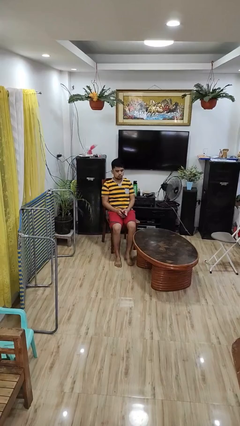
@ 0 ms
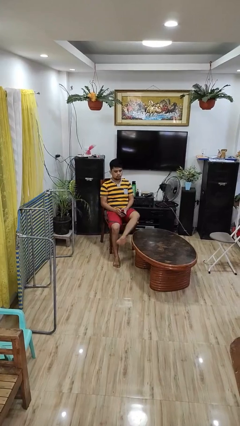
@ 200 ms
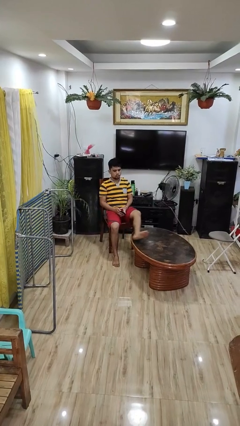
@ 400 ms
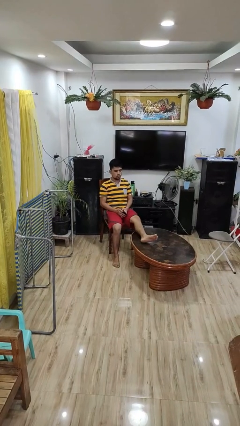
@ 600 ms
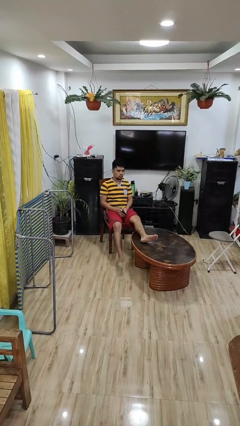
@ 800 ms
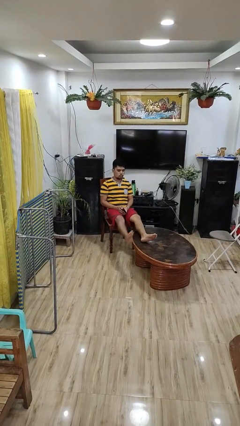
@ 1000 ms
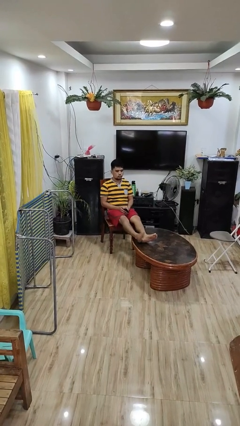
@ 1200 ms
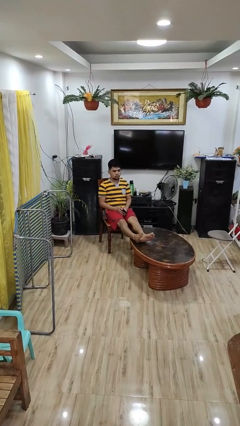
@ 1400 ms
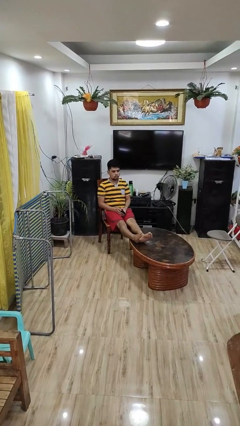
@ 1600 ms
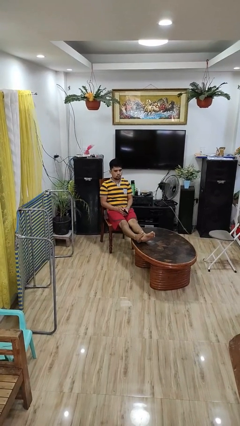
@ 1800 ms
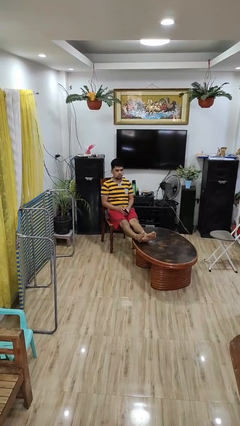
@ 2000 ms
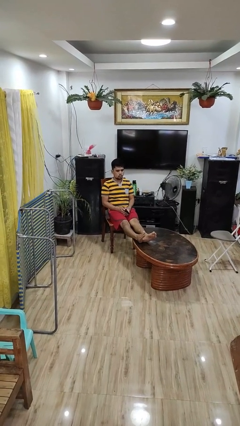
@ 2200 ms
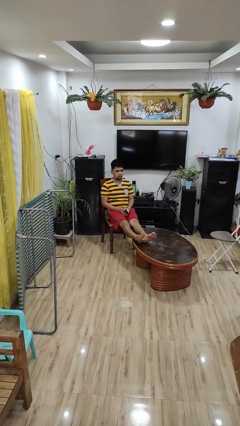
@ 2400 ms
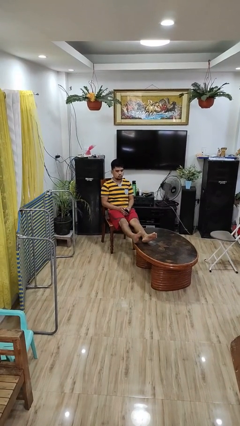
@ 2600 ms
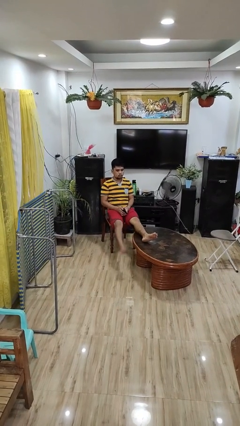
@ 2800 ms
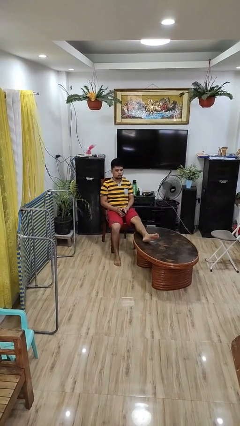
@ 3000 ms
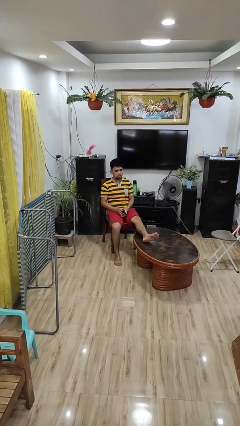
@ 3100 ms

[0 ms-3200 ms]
person puts feet up

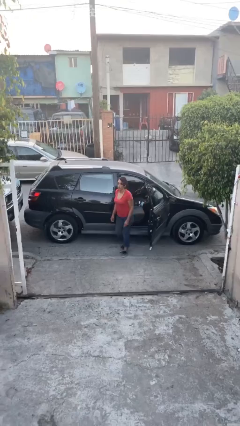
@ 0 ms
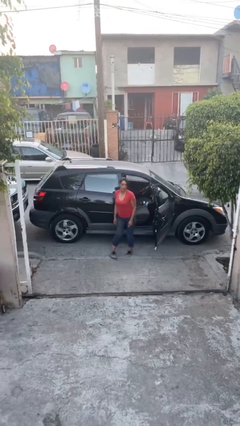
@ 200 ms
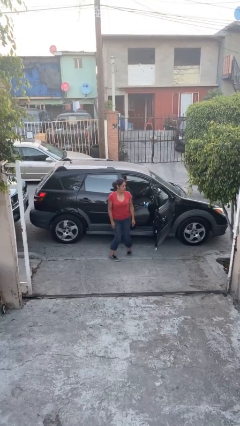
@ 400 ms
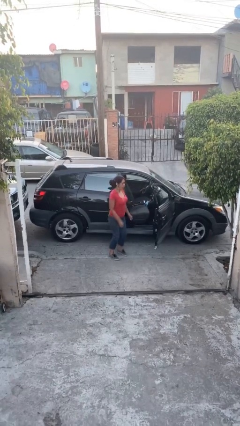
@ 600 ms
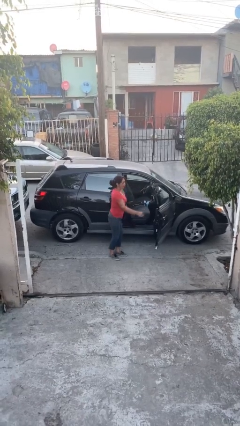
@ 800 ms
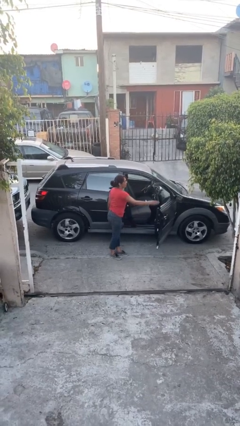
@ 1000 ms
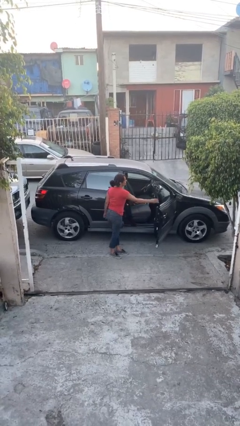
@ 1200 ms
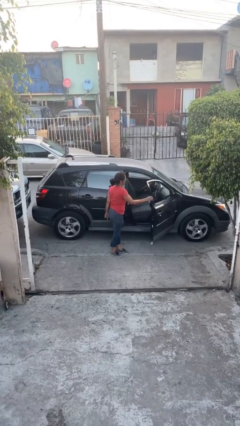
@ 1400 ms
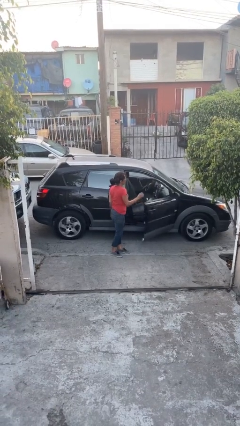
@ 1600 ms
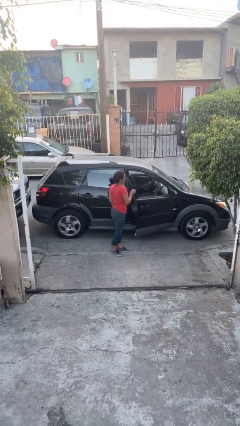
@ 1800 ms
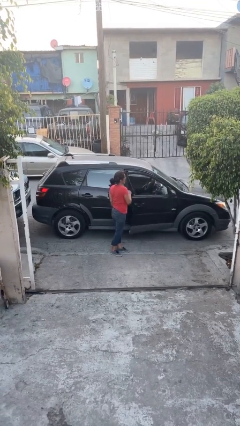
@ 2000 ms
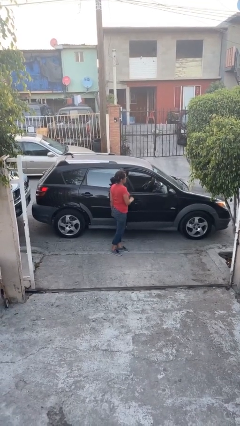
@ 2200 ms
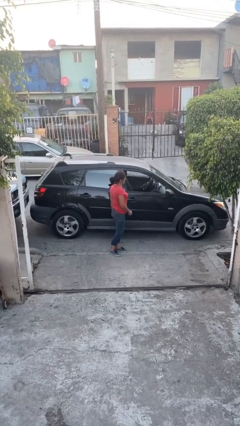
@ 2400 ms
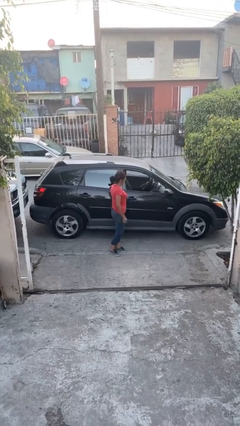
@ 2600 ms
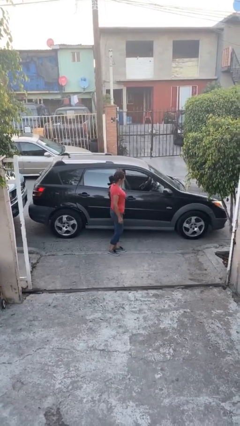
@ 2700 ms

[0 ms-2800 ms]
person closes car door

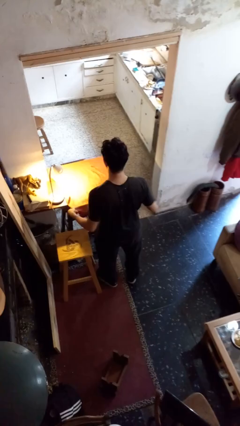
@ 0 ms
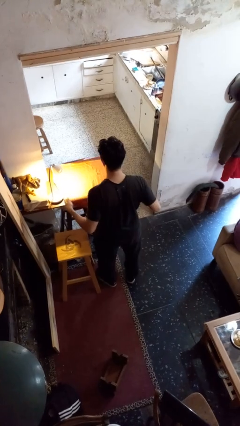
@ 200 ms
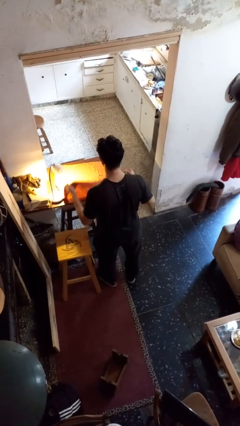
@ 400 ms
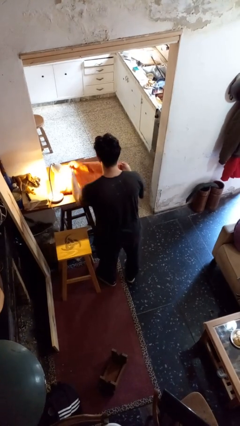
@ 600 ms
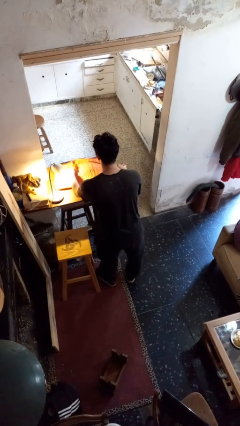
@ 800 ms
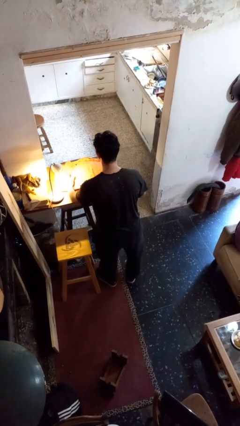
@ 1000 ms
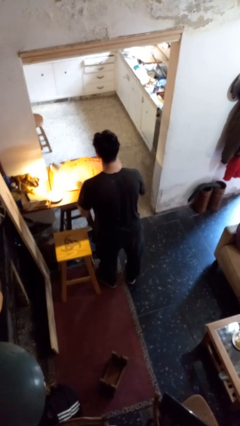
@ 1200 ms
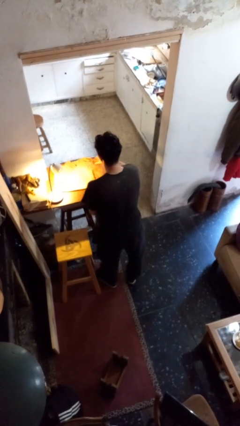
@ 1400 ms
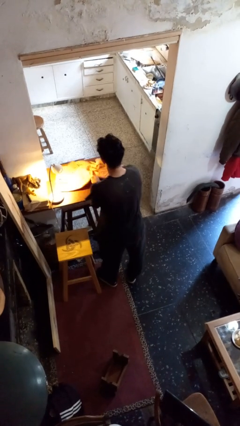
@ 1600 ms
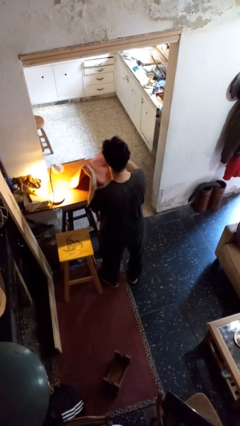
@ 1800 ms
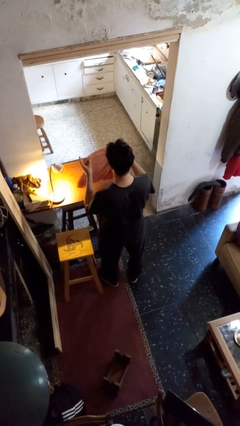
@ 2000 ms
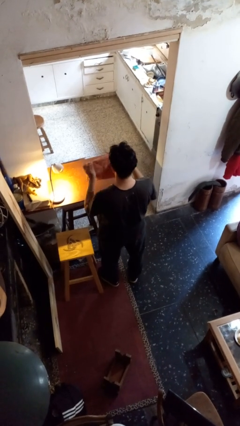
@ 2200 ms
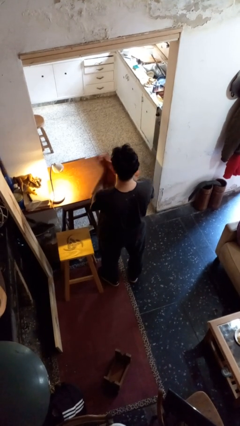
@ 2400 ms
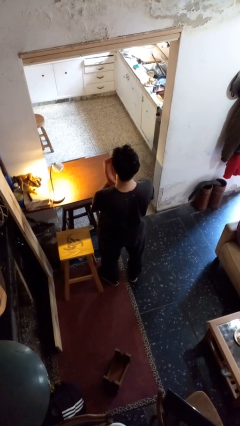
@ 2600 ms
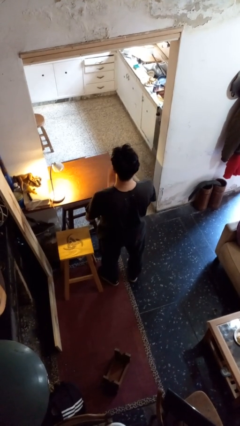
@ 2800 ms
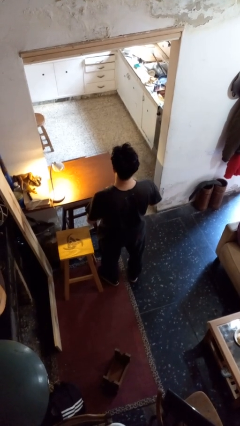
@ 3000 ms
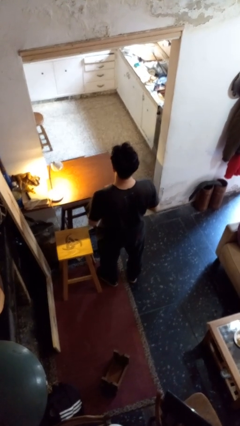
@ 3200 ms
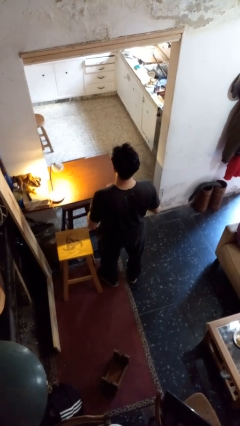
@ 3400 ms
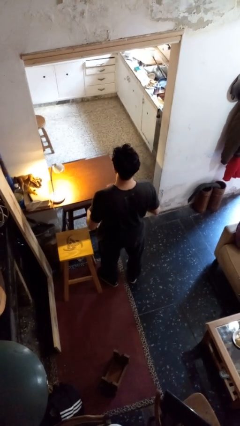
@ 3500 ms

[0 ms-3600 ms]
person folds tablecloth

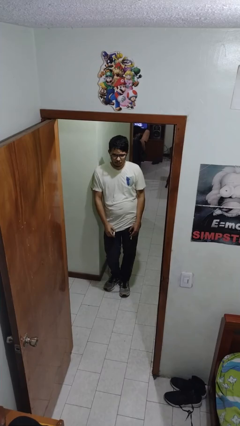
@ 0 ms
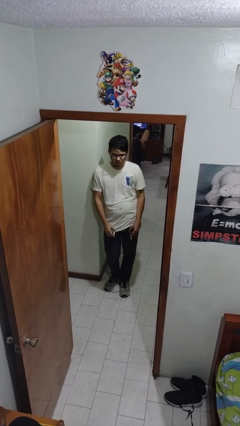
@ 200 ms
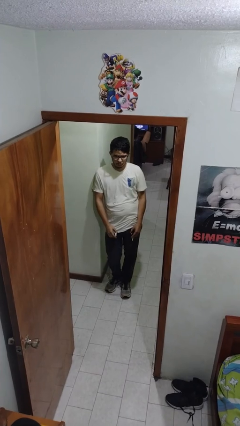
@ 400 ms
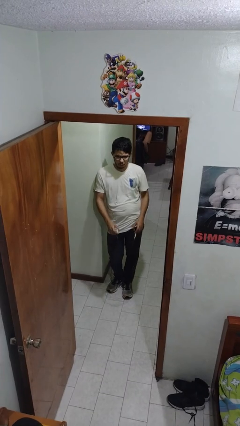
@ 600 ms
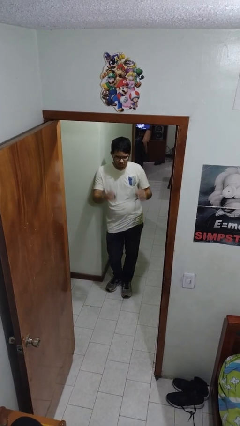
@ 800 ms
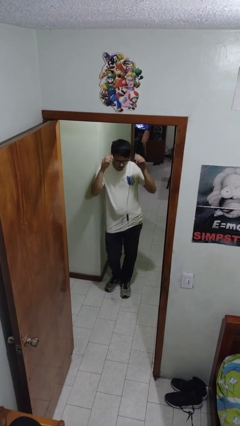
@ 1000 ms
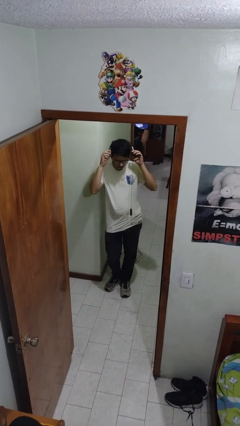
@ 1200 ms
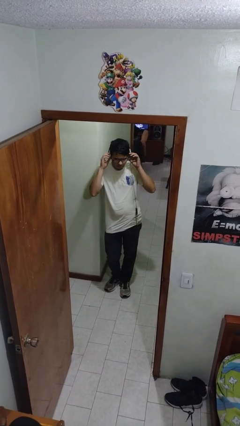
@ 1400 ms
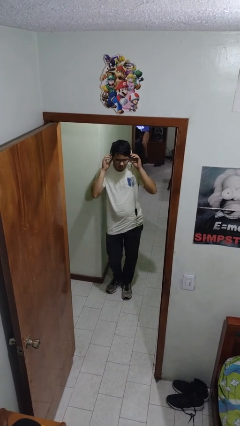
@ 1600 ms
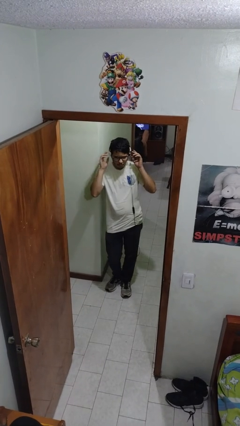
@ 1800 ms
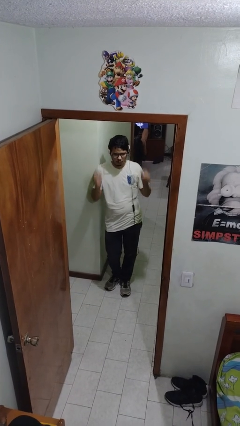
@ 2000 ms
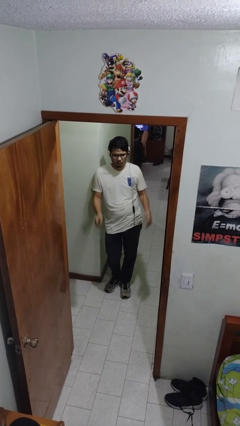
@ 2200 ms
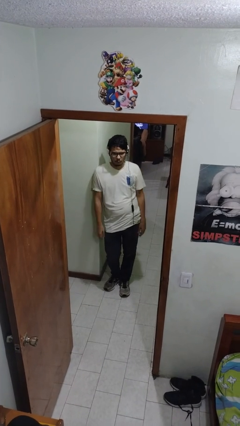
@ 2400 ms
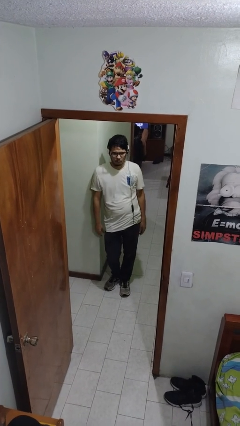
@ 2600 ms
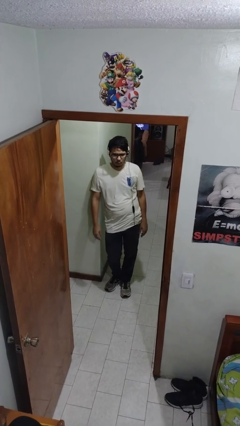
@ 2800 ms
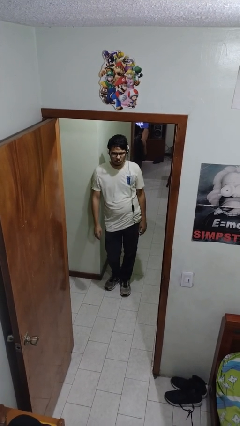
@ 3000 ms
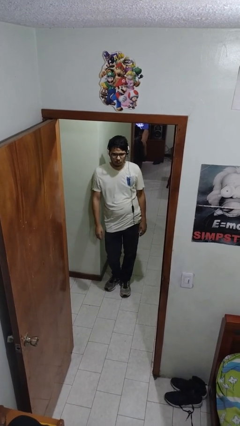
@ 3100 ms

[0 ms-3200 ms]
person puts on headphones

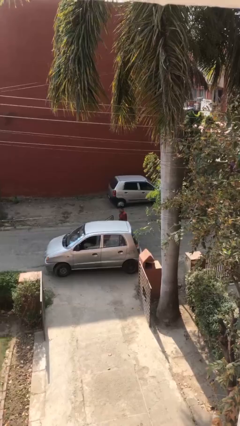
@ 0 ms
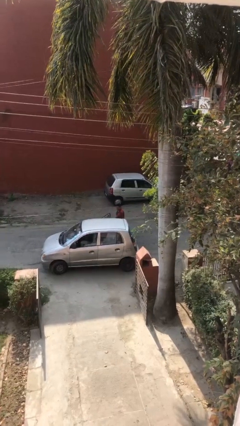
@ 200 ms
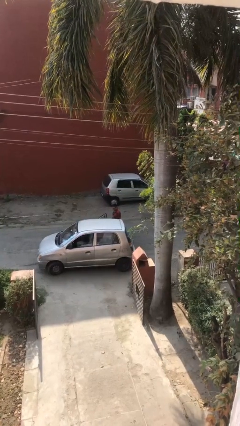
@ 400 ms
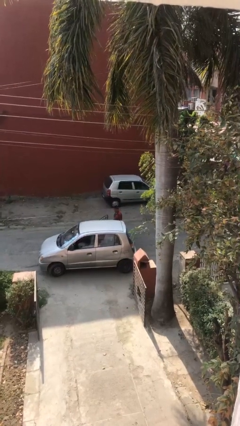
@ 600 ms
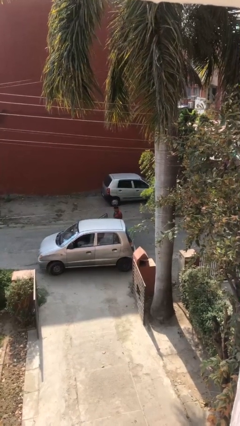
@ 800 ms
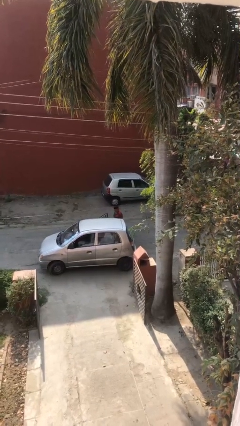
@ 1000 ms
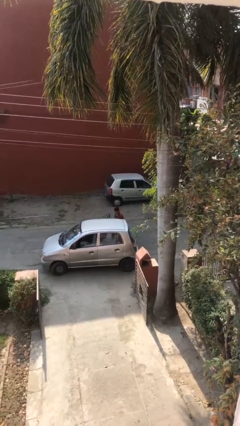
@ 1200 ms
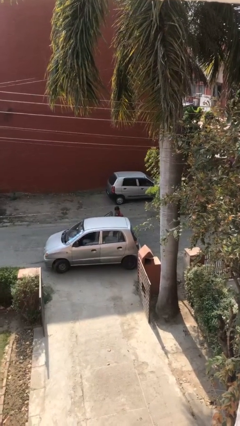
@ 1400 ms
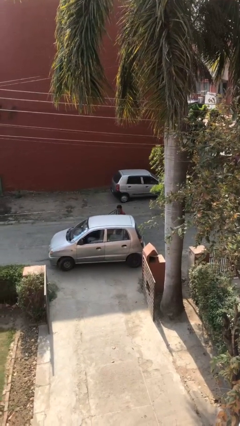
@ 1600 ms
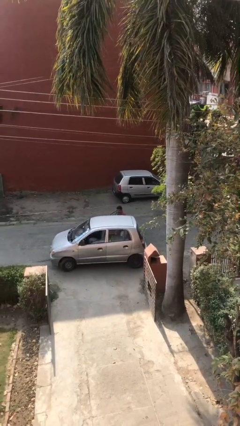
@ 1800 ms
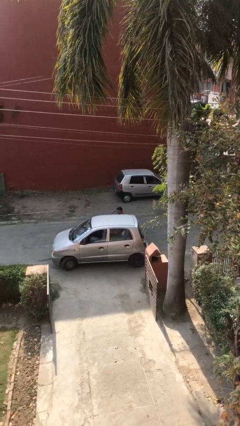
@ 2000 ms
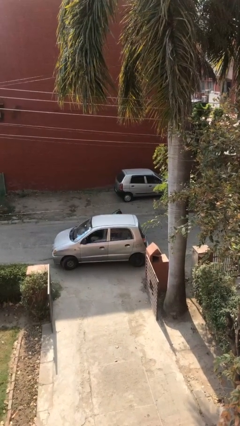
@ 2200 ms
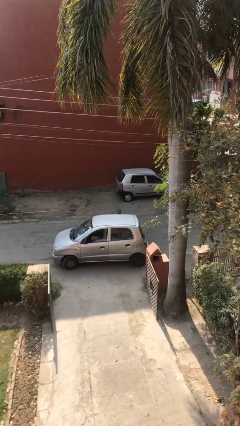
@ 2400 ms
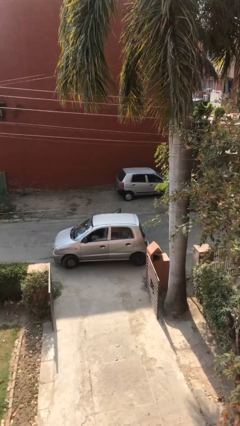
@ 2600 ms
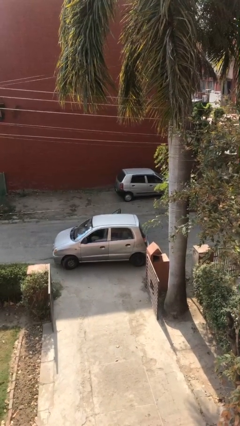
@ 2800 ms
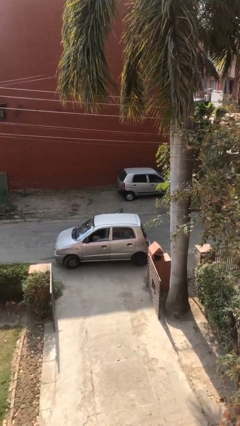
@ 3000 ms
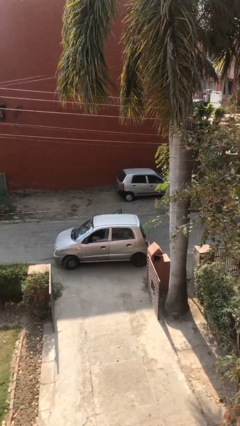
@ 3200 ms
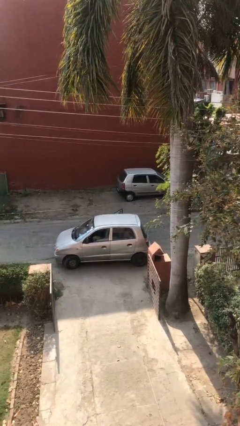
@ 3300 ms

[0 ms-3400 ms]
person enters car

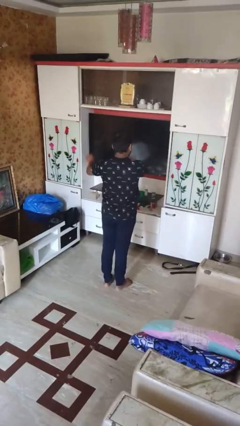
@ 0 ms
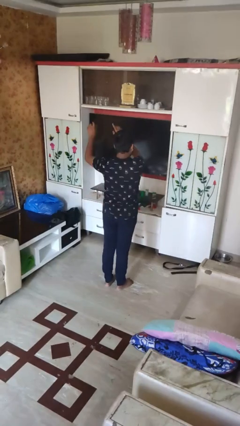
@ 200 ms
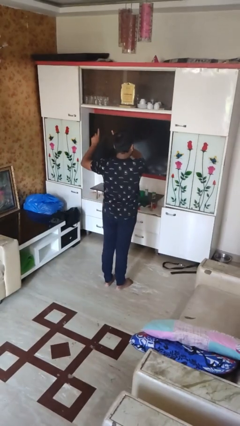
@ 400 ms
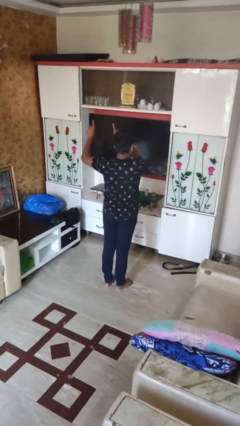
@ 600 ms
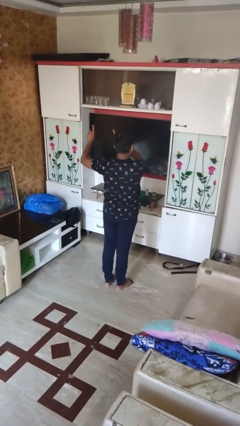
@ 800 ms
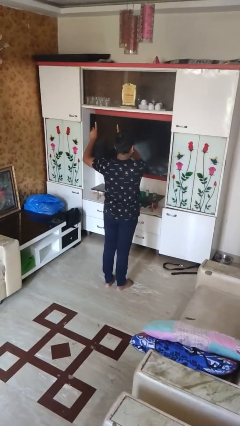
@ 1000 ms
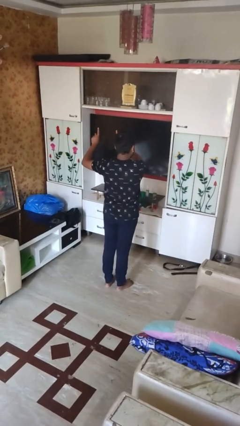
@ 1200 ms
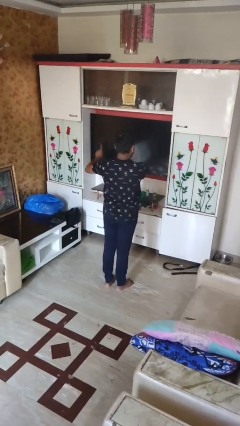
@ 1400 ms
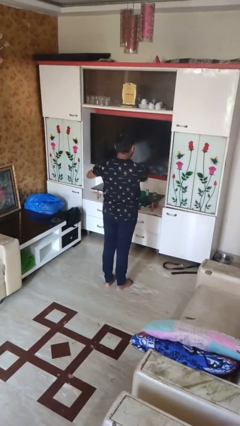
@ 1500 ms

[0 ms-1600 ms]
person dances in place
